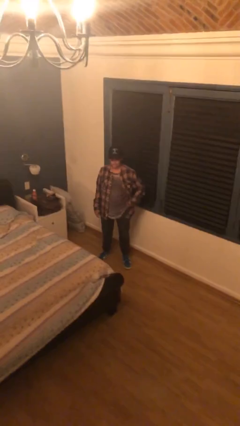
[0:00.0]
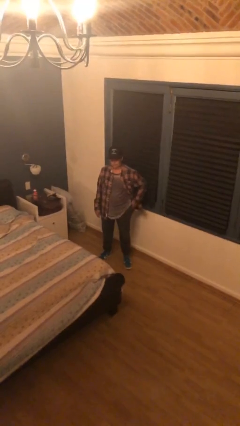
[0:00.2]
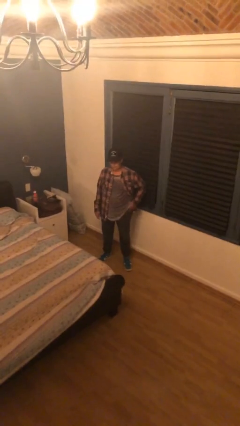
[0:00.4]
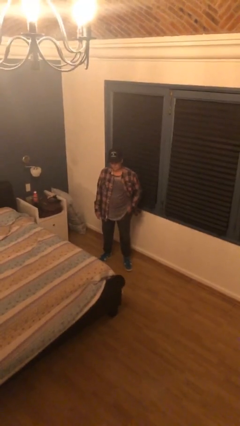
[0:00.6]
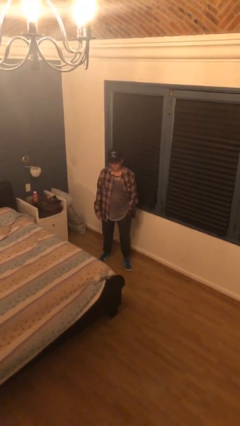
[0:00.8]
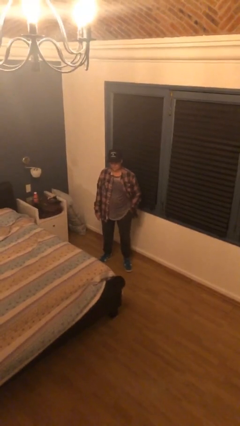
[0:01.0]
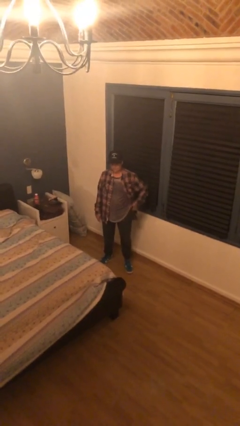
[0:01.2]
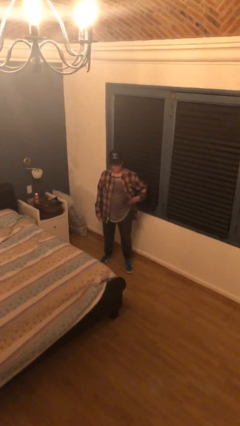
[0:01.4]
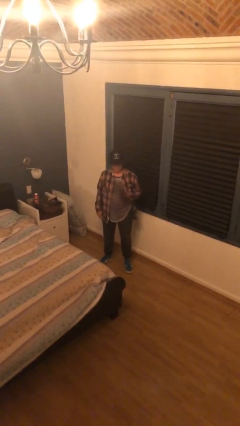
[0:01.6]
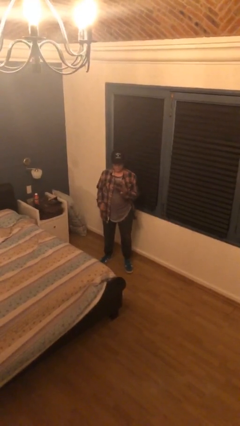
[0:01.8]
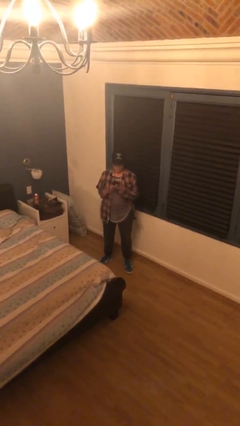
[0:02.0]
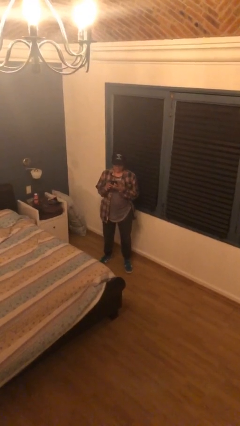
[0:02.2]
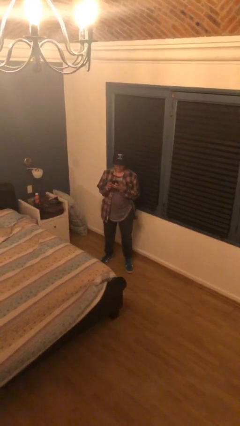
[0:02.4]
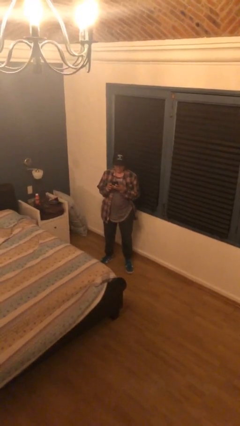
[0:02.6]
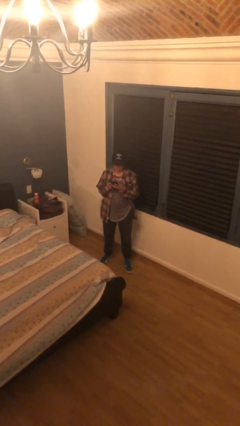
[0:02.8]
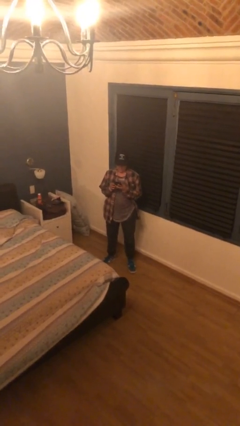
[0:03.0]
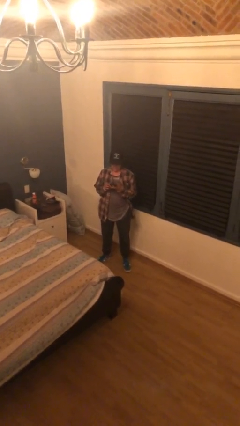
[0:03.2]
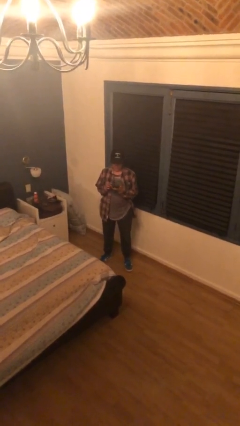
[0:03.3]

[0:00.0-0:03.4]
person takes phone from pocket

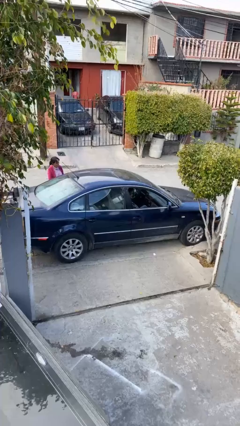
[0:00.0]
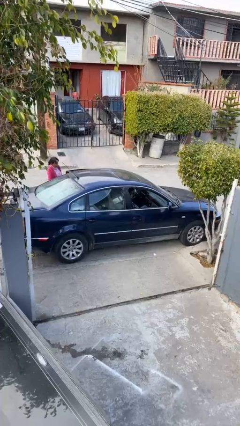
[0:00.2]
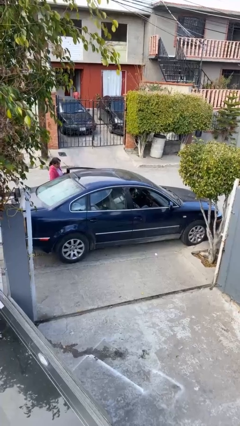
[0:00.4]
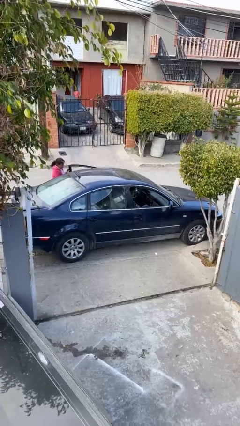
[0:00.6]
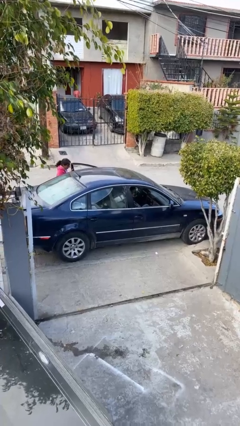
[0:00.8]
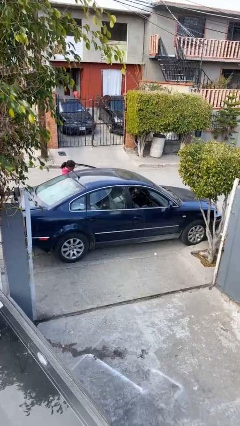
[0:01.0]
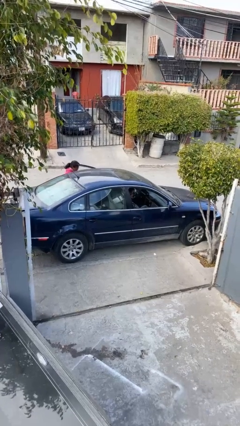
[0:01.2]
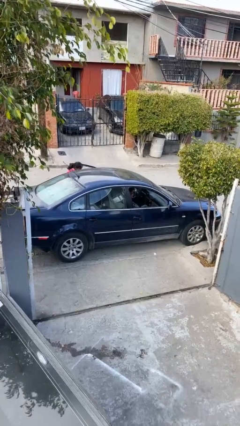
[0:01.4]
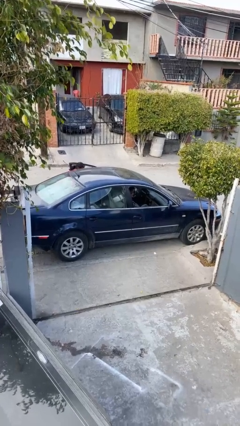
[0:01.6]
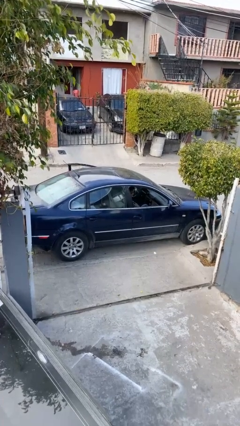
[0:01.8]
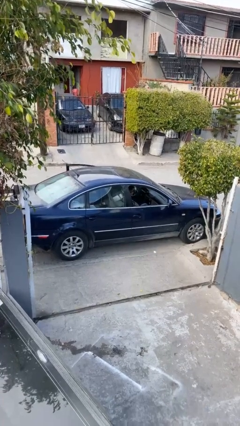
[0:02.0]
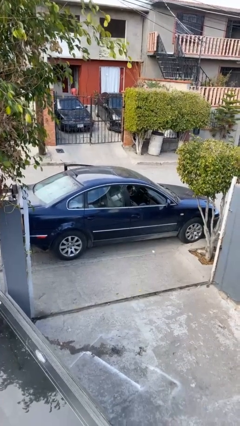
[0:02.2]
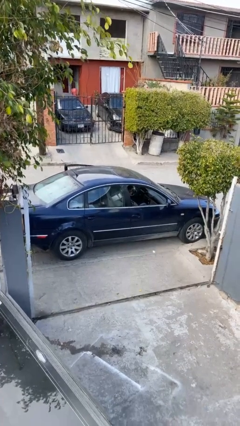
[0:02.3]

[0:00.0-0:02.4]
car picks up person

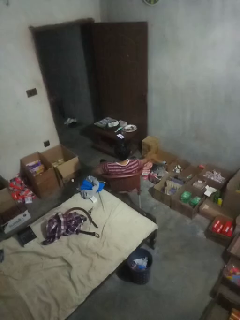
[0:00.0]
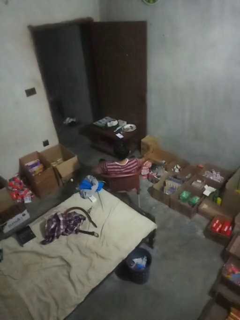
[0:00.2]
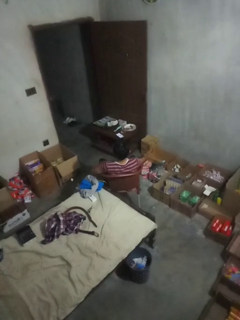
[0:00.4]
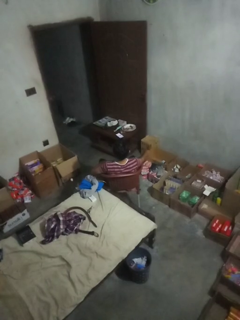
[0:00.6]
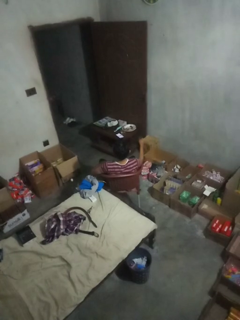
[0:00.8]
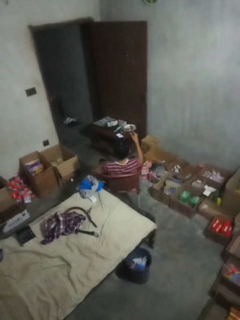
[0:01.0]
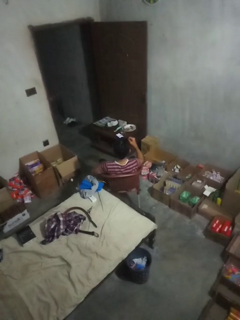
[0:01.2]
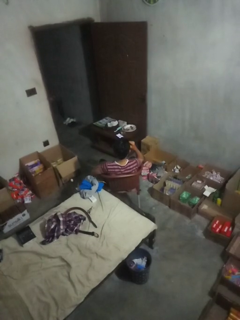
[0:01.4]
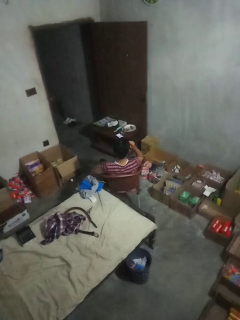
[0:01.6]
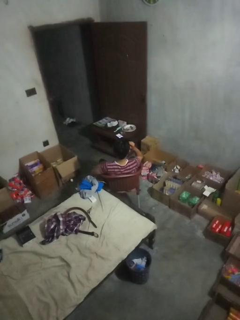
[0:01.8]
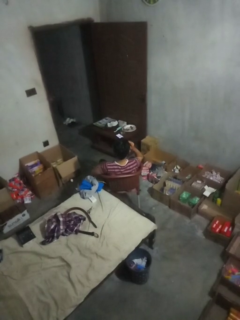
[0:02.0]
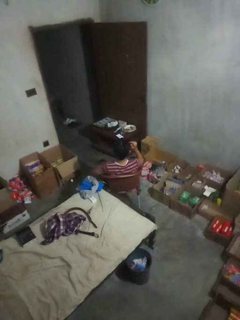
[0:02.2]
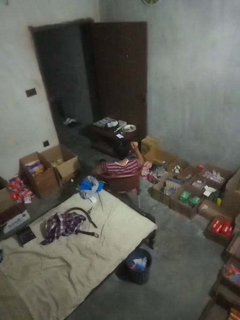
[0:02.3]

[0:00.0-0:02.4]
person puts on sunglasses

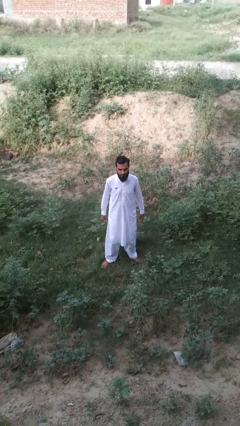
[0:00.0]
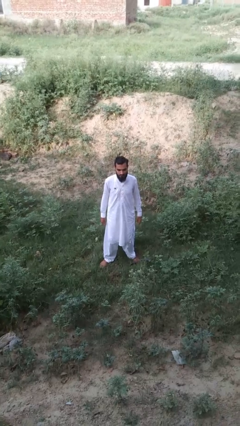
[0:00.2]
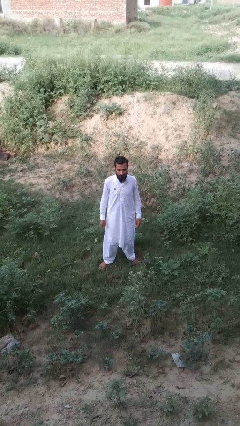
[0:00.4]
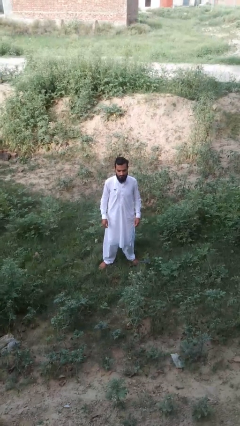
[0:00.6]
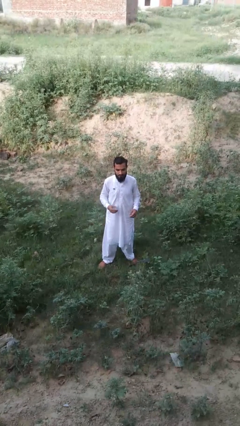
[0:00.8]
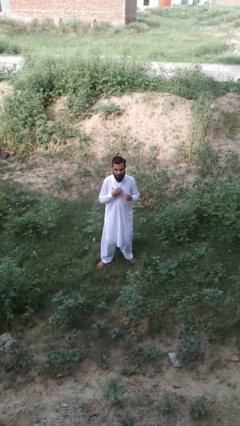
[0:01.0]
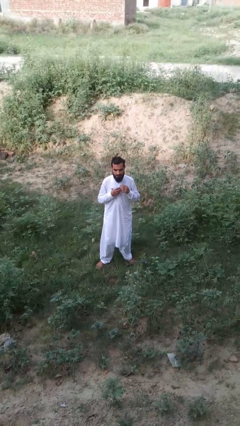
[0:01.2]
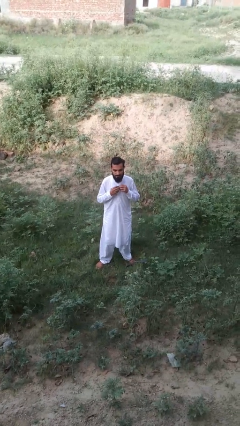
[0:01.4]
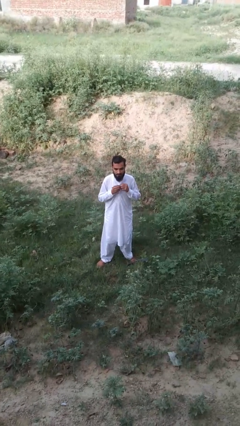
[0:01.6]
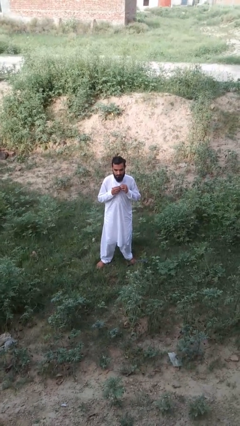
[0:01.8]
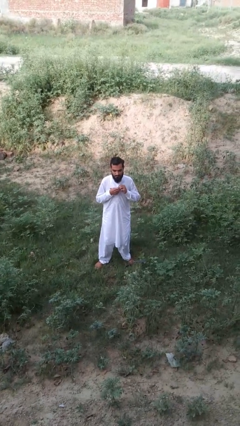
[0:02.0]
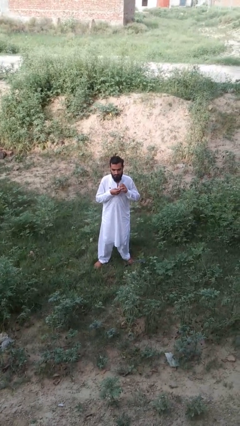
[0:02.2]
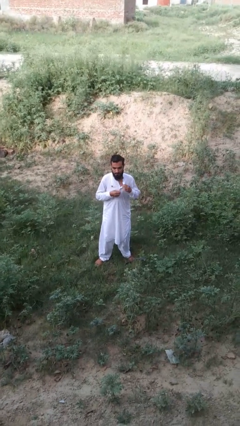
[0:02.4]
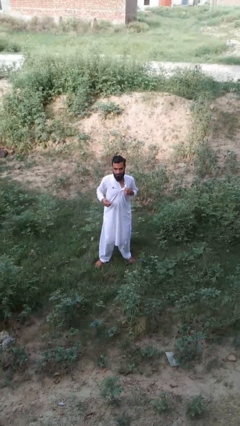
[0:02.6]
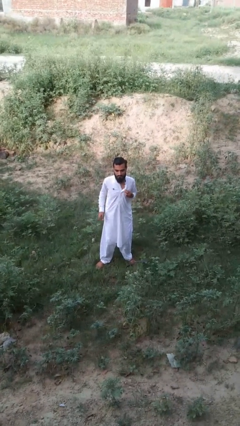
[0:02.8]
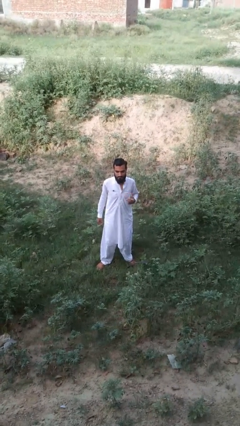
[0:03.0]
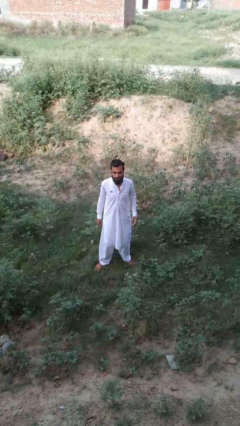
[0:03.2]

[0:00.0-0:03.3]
person unbuttons shirt

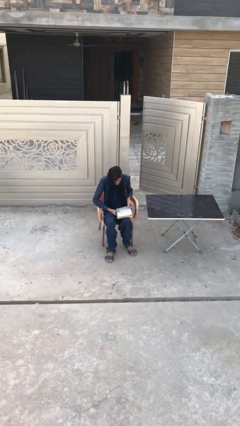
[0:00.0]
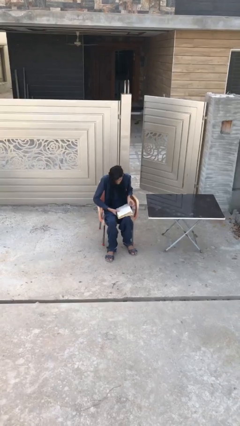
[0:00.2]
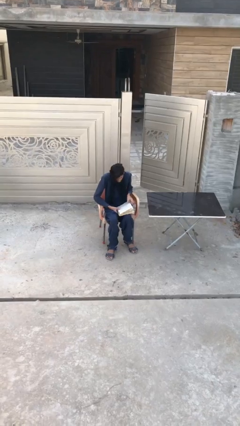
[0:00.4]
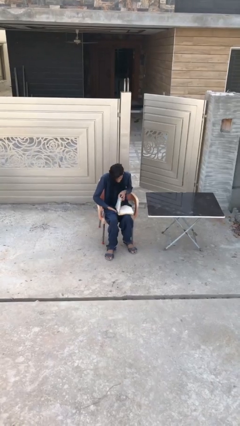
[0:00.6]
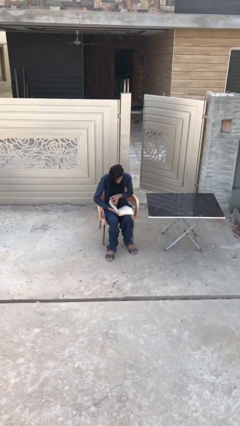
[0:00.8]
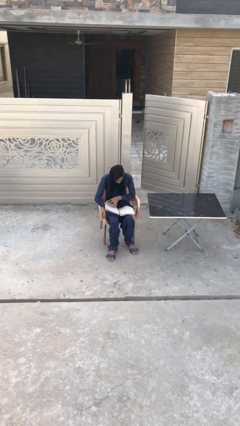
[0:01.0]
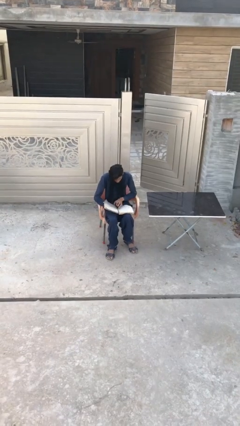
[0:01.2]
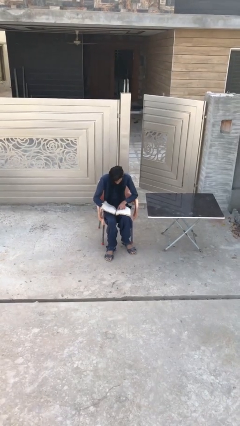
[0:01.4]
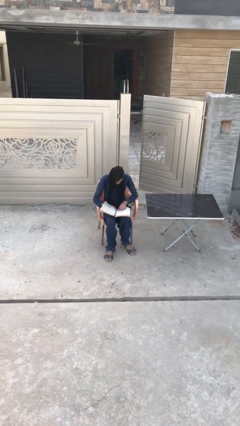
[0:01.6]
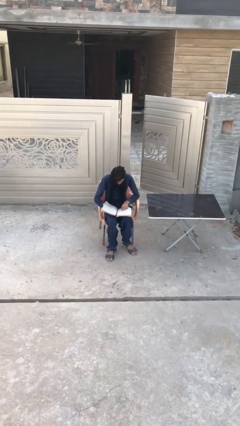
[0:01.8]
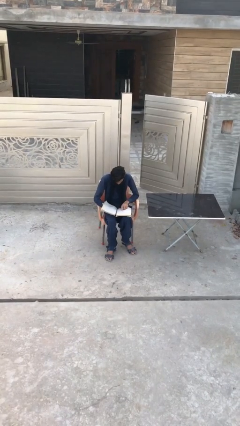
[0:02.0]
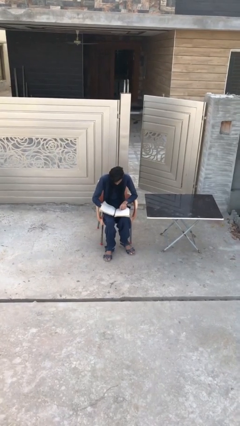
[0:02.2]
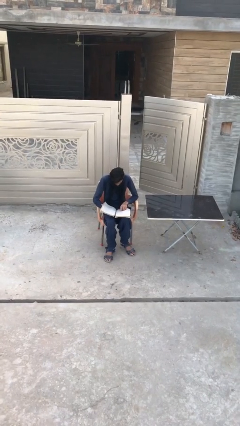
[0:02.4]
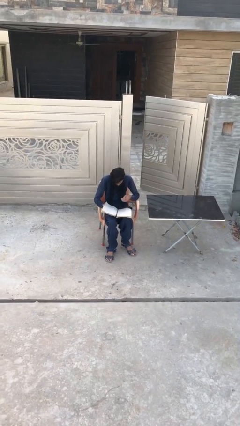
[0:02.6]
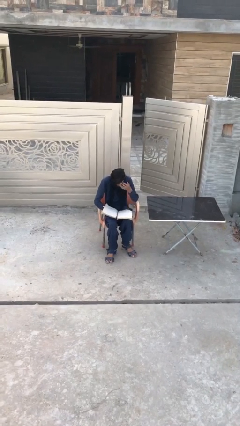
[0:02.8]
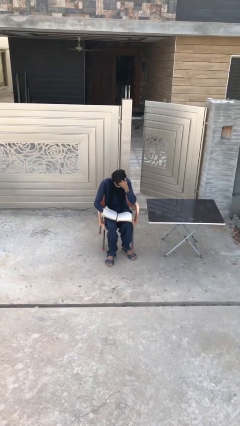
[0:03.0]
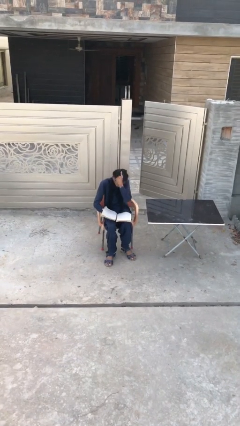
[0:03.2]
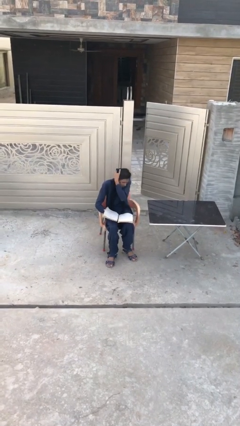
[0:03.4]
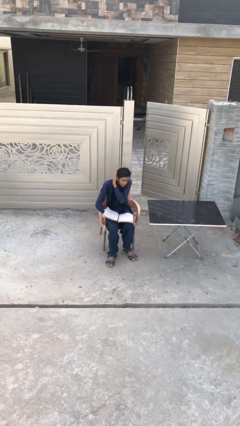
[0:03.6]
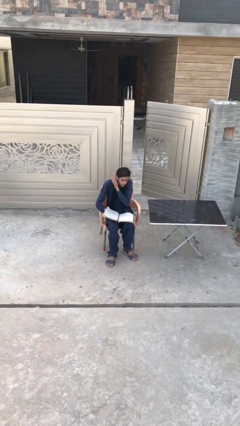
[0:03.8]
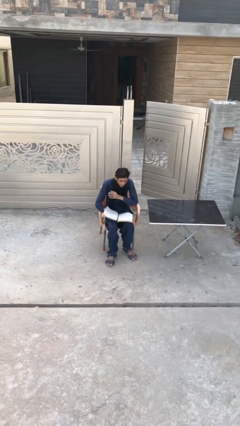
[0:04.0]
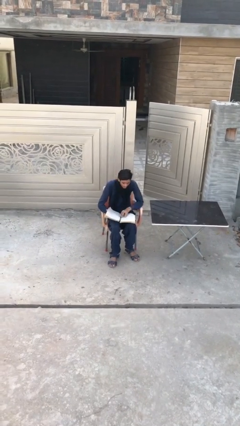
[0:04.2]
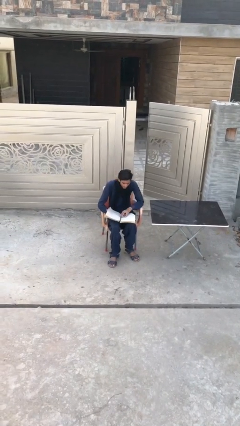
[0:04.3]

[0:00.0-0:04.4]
person reads document

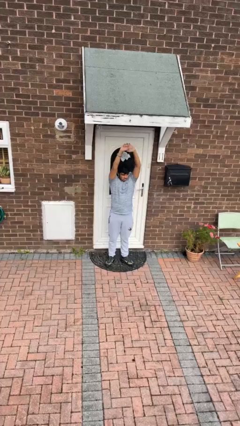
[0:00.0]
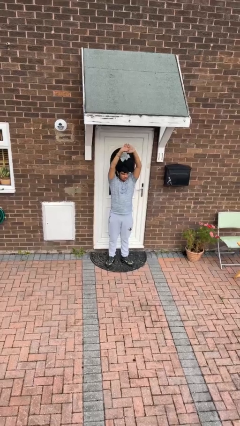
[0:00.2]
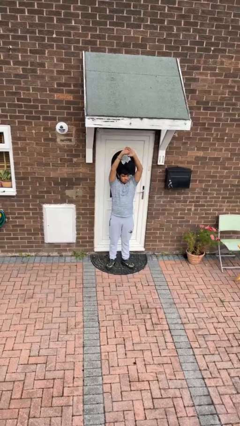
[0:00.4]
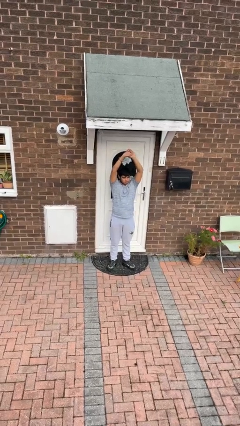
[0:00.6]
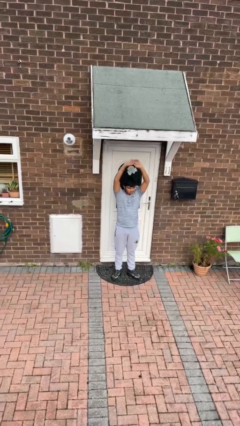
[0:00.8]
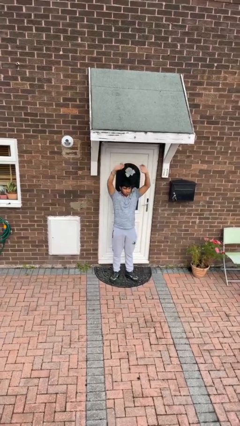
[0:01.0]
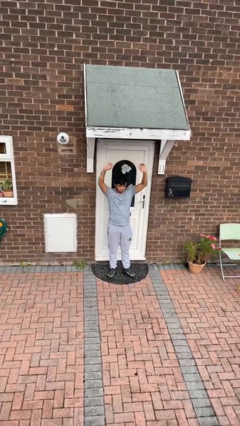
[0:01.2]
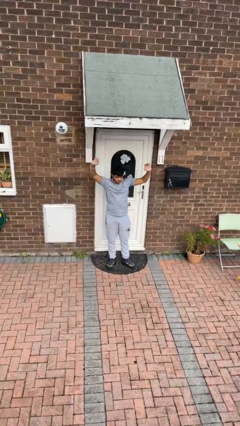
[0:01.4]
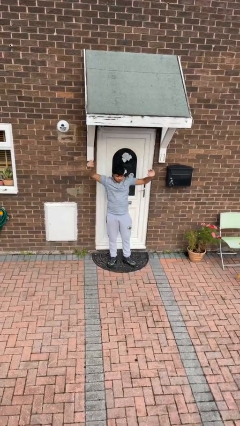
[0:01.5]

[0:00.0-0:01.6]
person stretches arms over head
